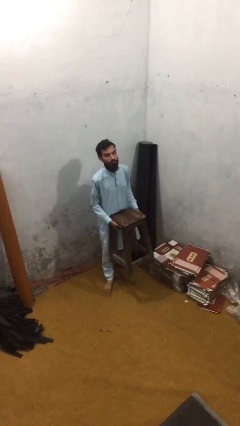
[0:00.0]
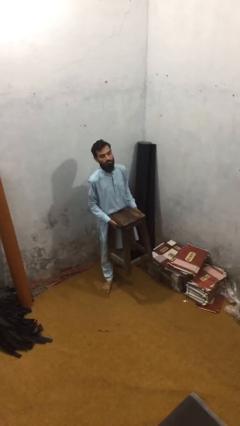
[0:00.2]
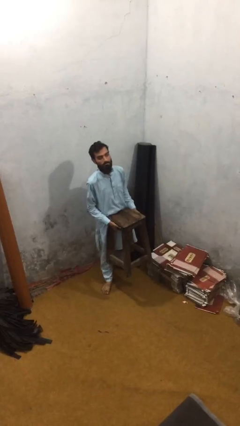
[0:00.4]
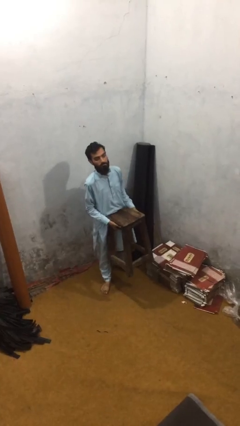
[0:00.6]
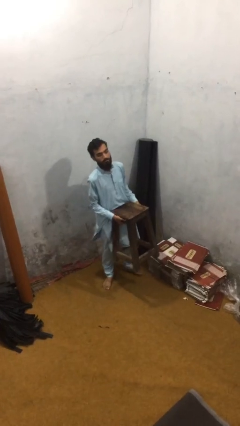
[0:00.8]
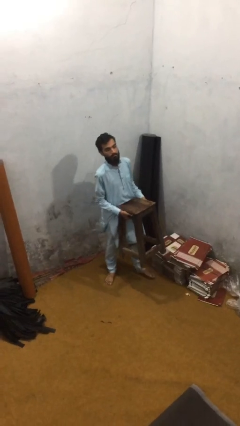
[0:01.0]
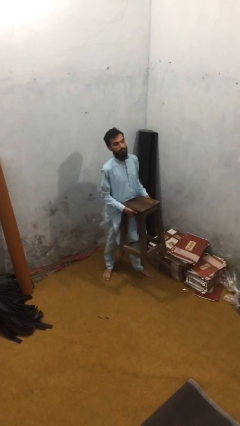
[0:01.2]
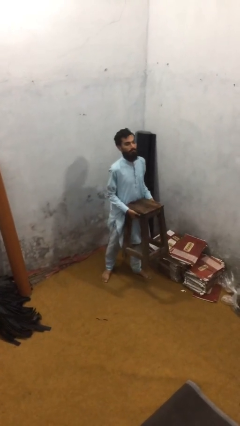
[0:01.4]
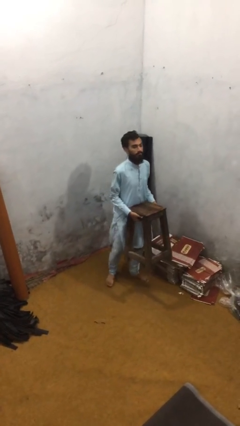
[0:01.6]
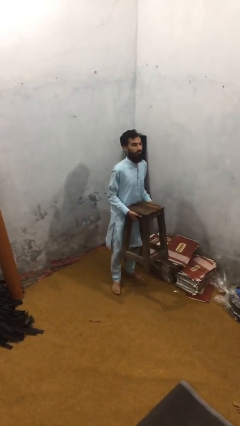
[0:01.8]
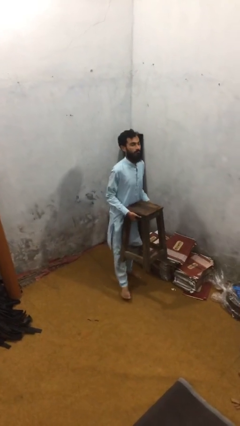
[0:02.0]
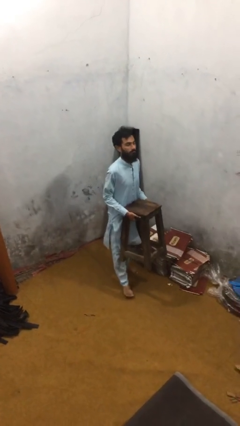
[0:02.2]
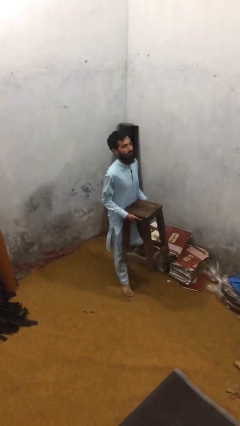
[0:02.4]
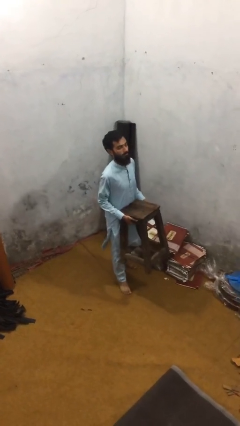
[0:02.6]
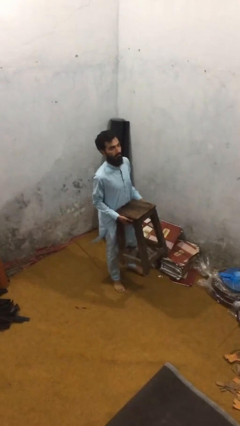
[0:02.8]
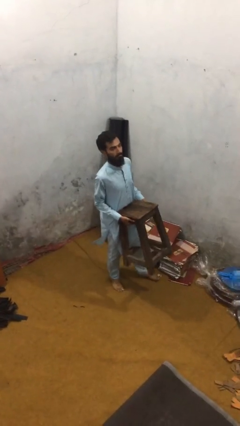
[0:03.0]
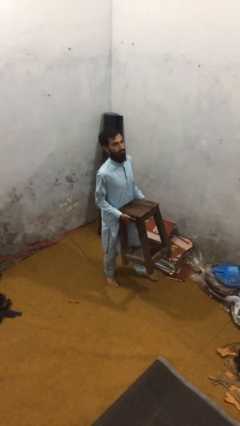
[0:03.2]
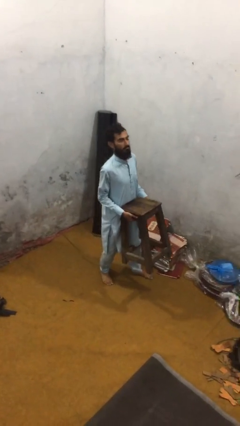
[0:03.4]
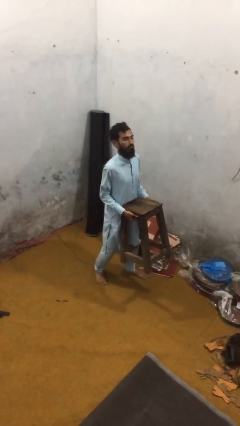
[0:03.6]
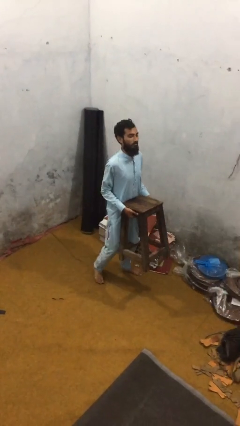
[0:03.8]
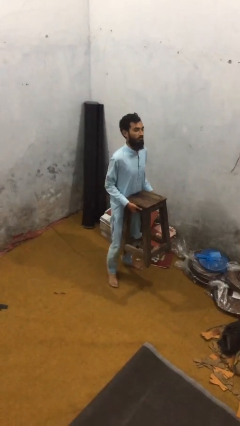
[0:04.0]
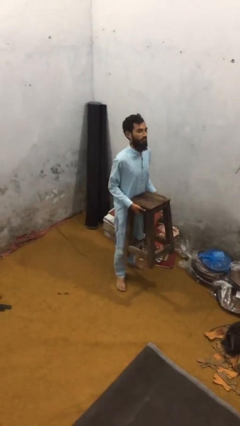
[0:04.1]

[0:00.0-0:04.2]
person carries heavy object

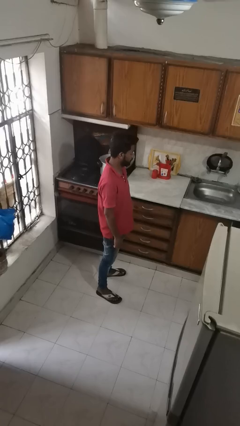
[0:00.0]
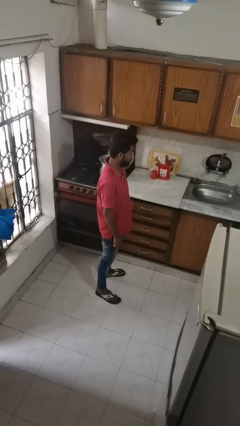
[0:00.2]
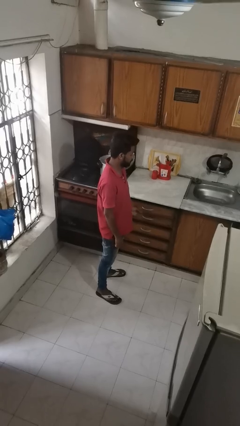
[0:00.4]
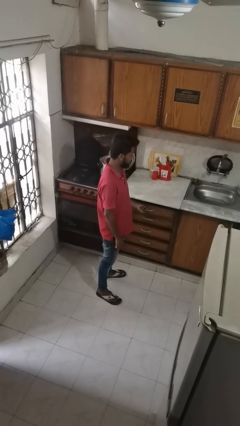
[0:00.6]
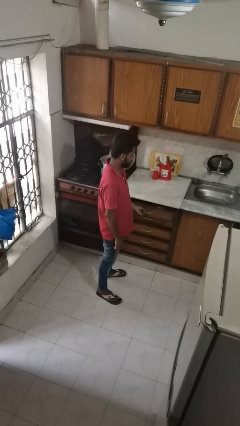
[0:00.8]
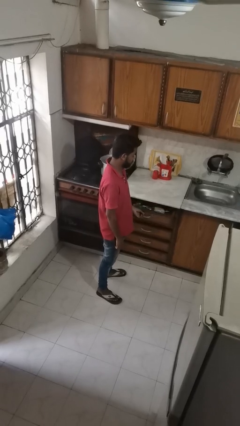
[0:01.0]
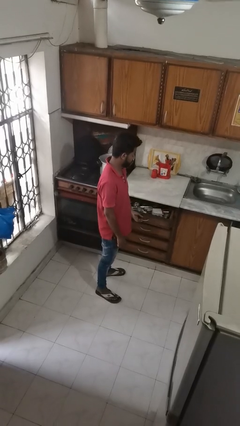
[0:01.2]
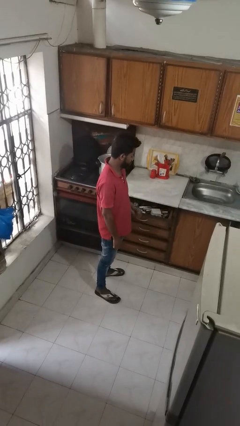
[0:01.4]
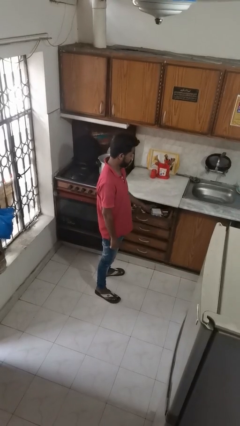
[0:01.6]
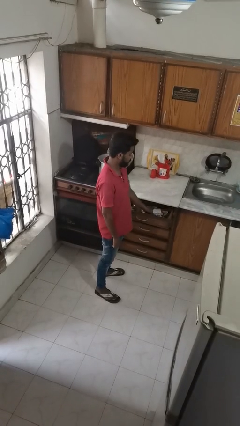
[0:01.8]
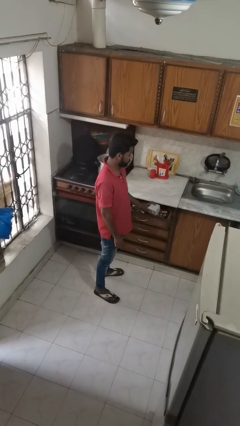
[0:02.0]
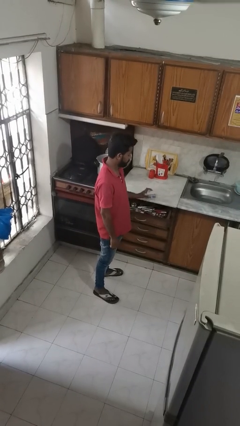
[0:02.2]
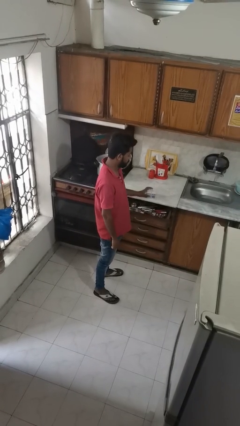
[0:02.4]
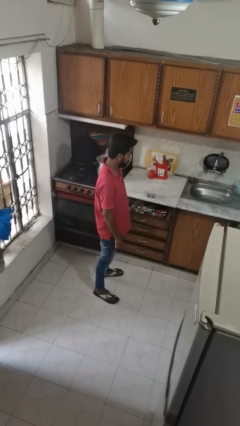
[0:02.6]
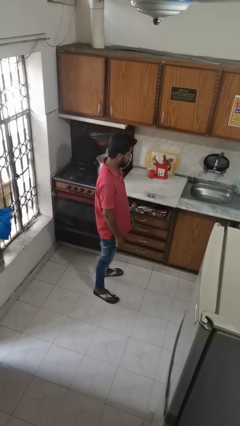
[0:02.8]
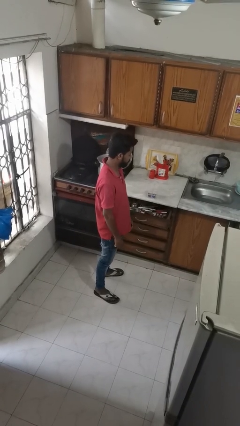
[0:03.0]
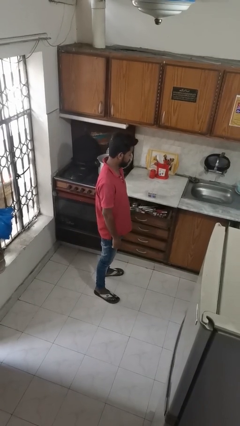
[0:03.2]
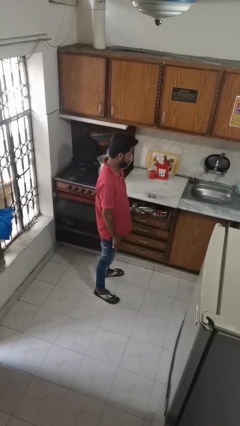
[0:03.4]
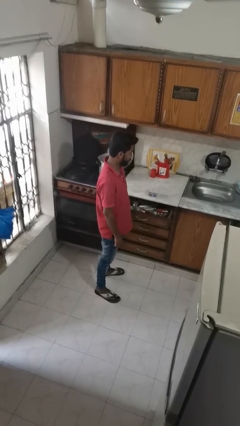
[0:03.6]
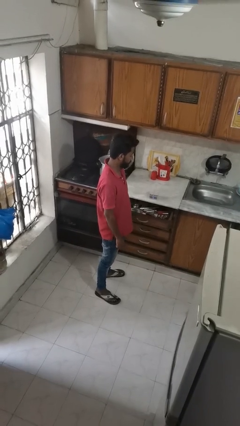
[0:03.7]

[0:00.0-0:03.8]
person takes object from kitchen drawer

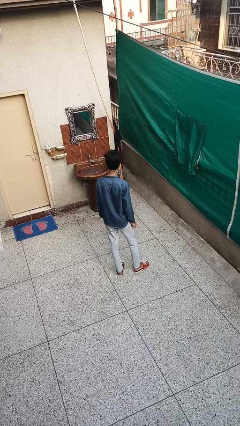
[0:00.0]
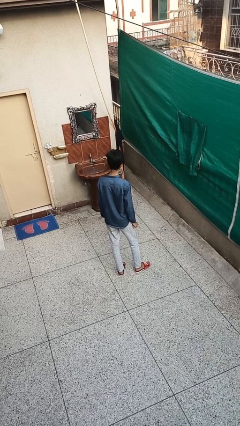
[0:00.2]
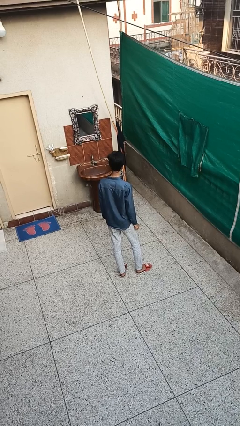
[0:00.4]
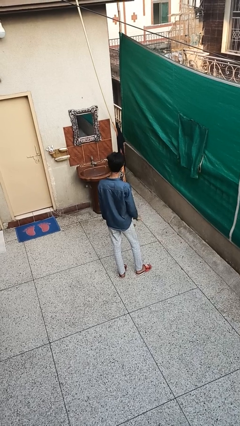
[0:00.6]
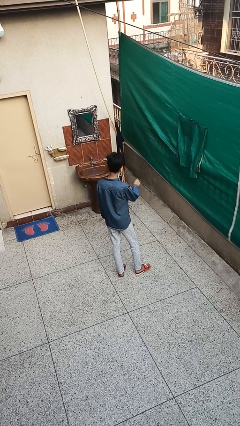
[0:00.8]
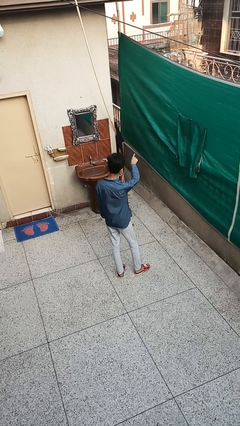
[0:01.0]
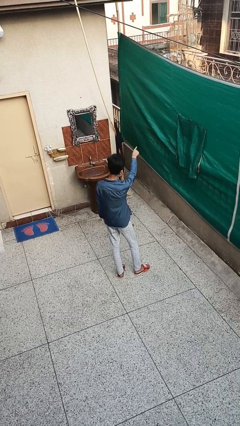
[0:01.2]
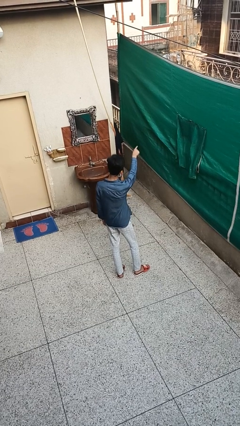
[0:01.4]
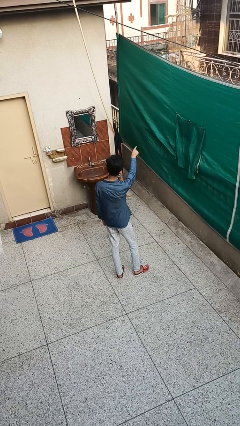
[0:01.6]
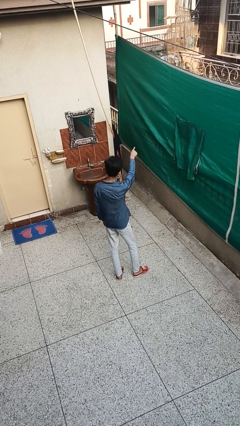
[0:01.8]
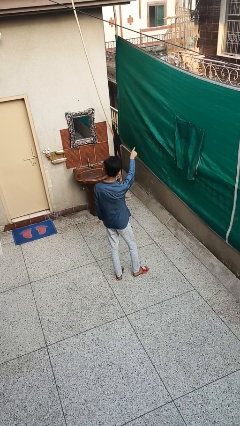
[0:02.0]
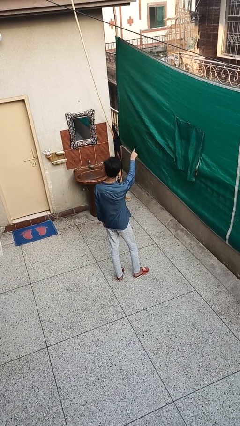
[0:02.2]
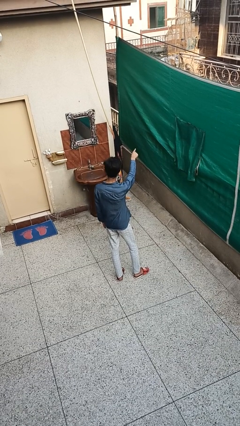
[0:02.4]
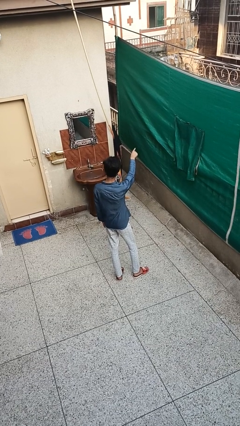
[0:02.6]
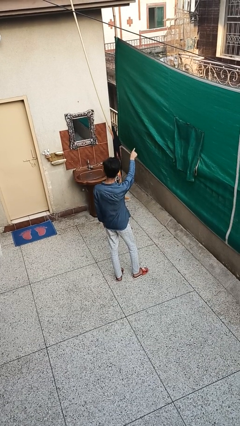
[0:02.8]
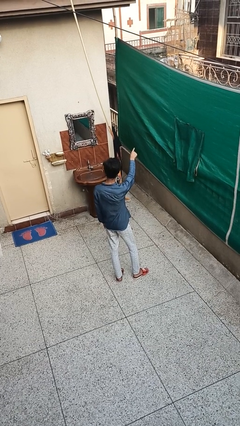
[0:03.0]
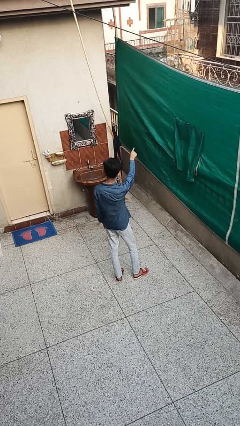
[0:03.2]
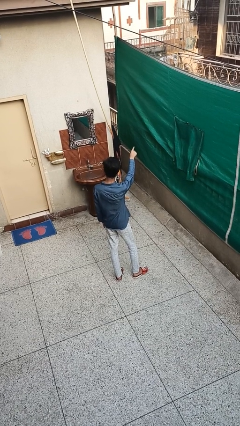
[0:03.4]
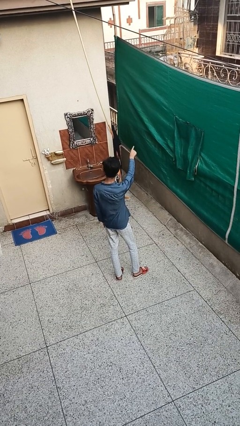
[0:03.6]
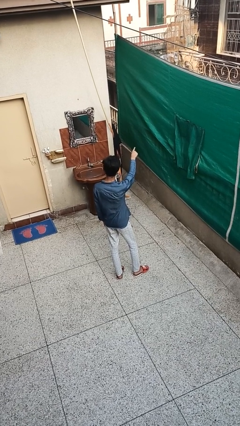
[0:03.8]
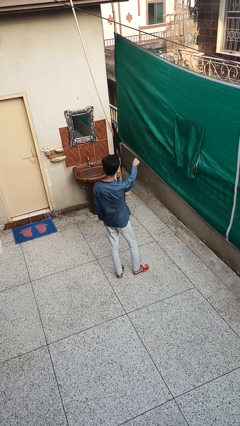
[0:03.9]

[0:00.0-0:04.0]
person points at person

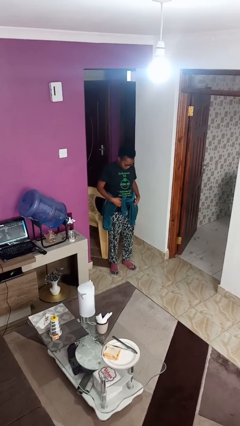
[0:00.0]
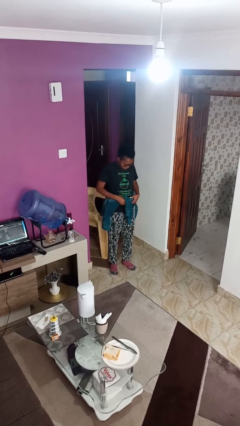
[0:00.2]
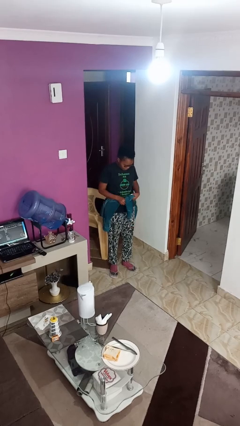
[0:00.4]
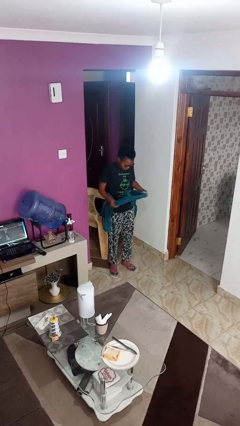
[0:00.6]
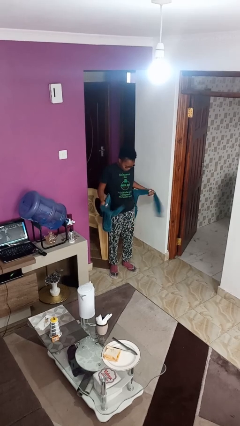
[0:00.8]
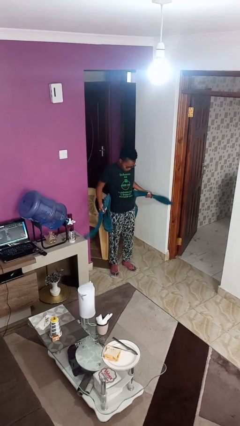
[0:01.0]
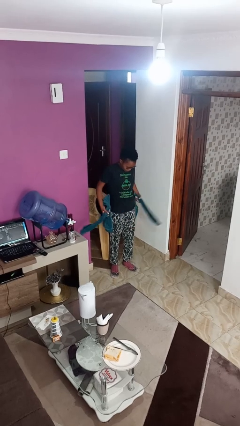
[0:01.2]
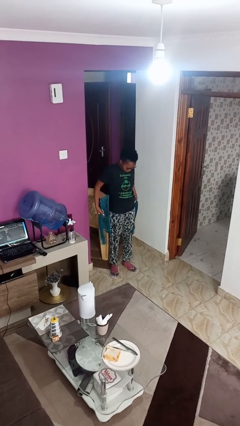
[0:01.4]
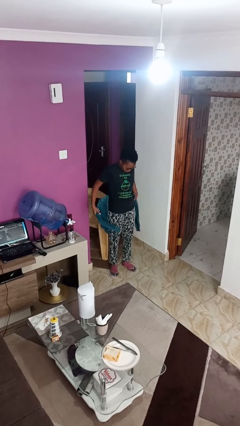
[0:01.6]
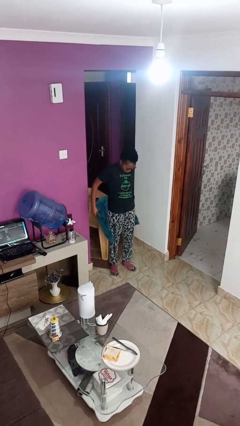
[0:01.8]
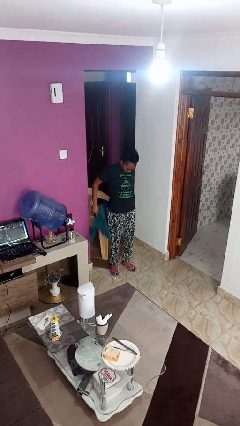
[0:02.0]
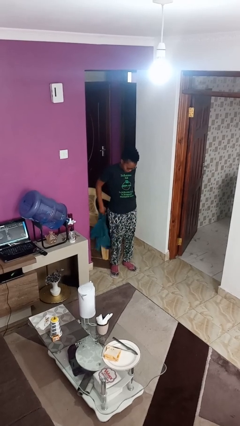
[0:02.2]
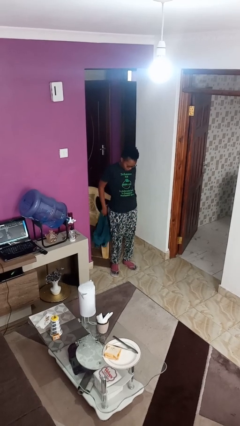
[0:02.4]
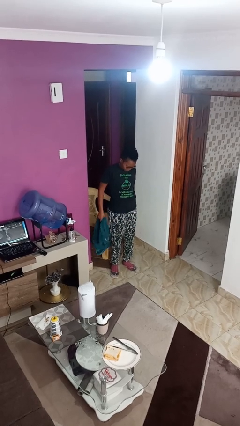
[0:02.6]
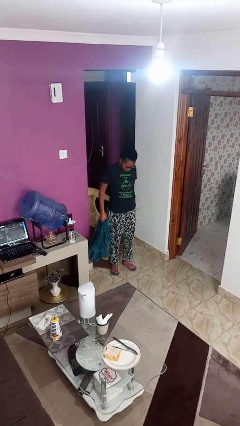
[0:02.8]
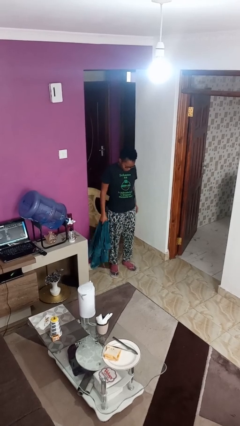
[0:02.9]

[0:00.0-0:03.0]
person unties jacket around waist

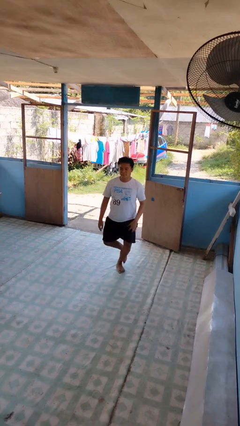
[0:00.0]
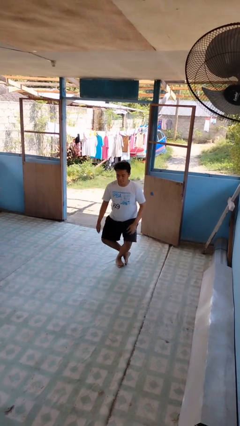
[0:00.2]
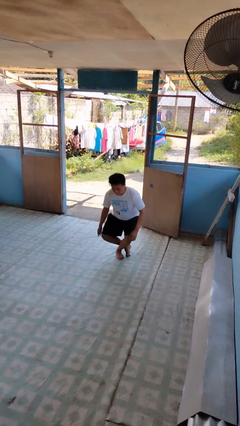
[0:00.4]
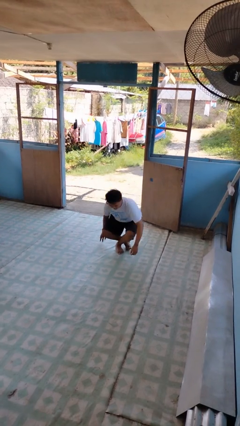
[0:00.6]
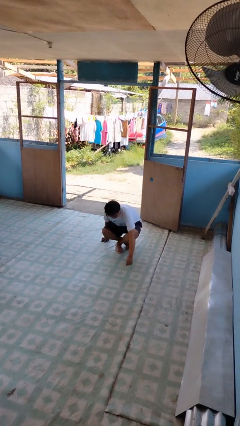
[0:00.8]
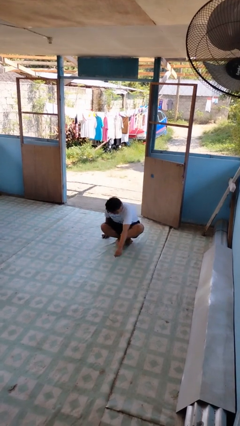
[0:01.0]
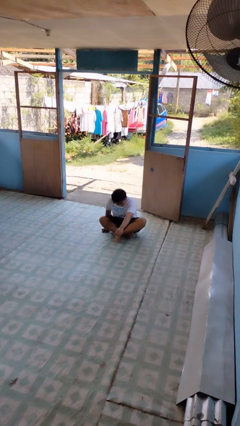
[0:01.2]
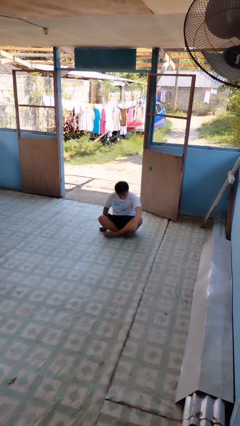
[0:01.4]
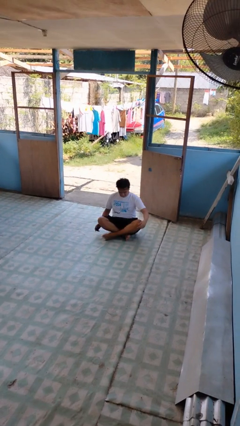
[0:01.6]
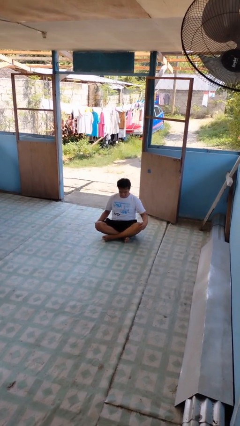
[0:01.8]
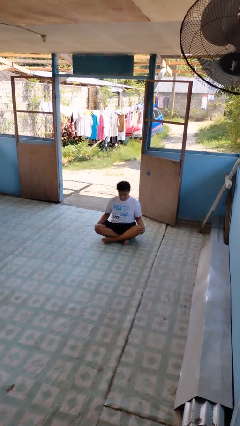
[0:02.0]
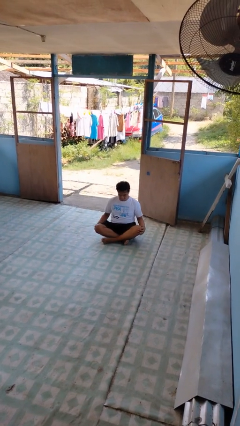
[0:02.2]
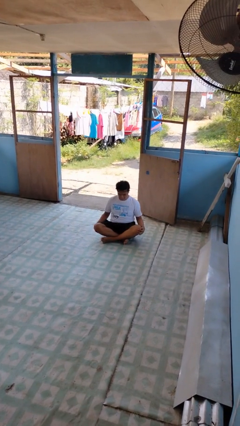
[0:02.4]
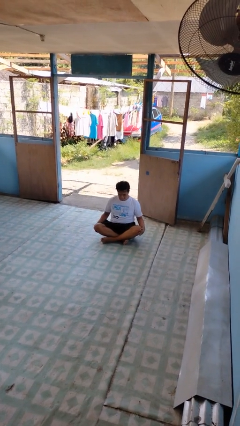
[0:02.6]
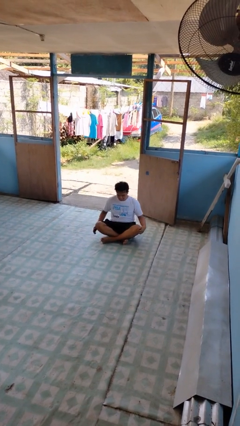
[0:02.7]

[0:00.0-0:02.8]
person sits crisscross
